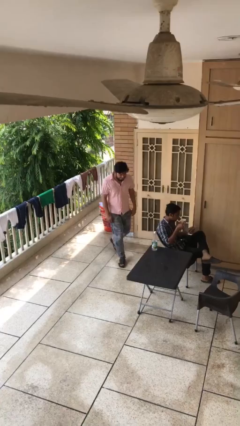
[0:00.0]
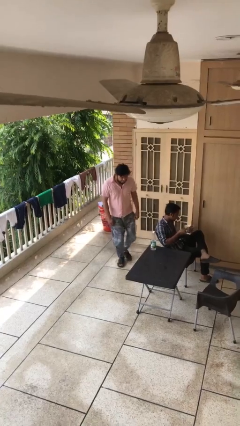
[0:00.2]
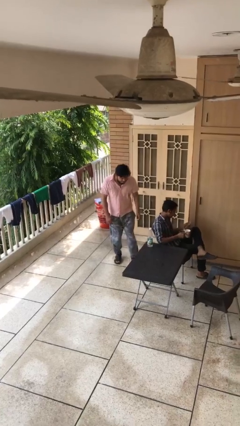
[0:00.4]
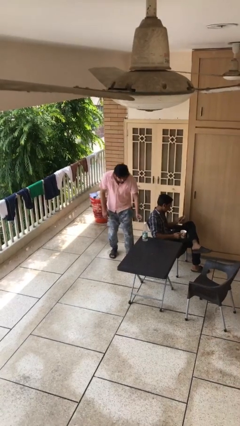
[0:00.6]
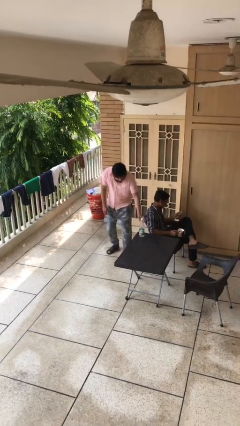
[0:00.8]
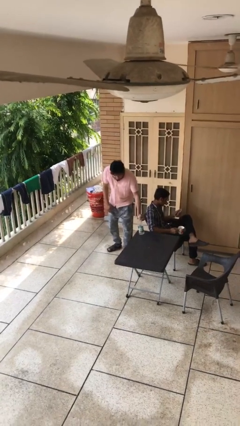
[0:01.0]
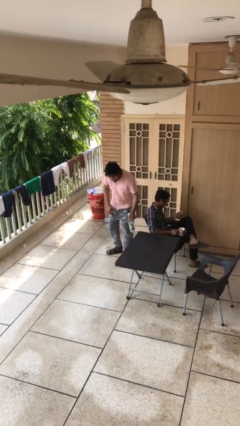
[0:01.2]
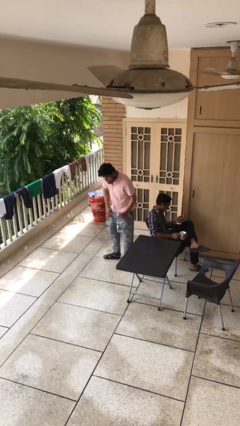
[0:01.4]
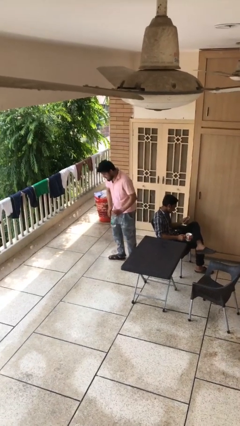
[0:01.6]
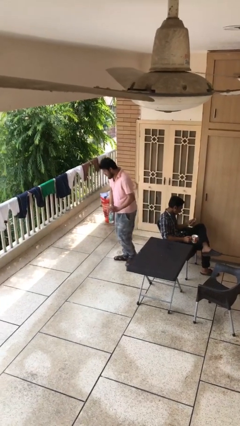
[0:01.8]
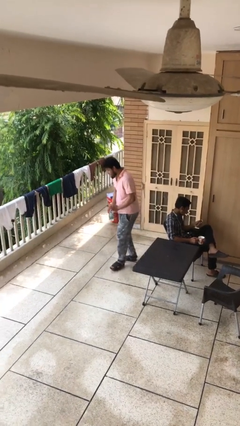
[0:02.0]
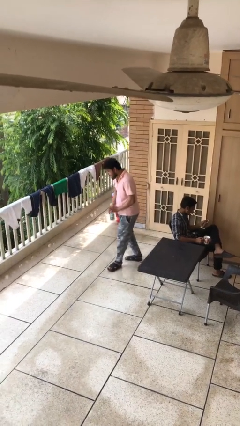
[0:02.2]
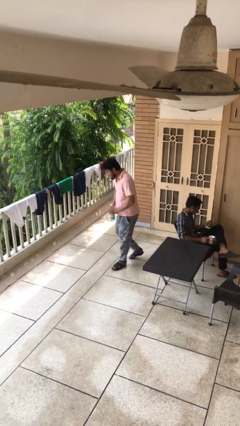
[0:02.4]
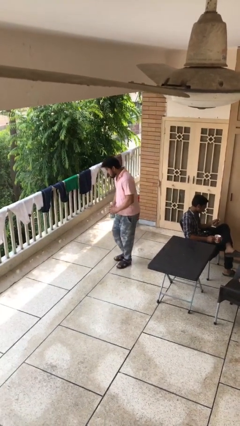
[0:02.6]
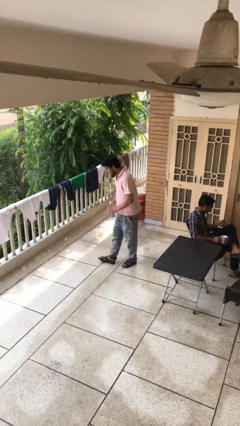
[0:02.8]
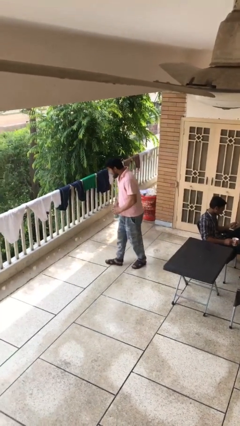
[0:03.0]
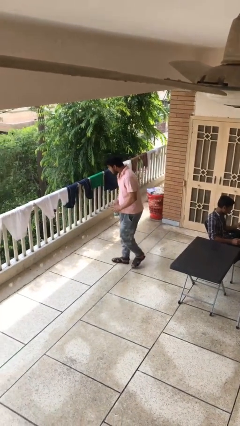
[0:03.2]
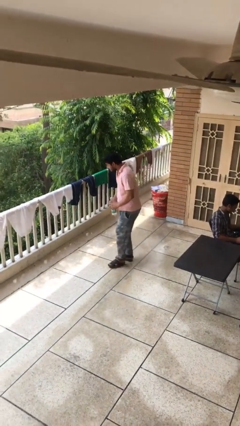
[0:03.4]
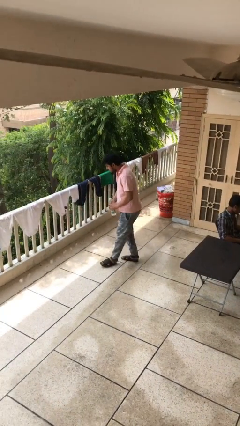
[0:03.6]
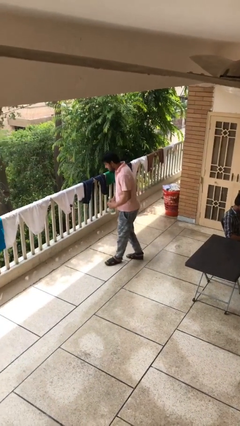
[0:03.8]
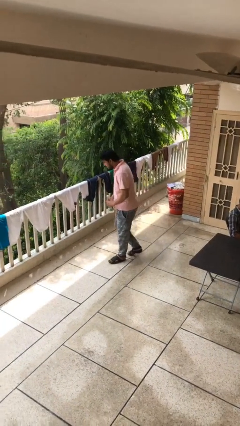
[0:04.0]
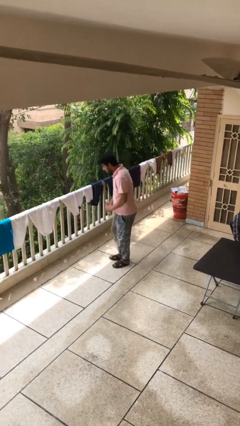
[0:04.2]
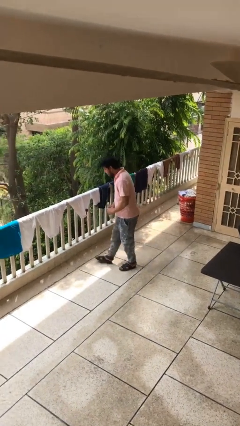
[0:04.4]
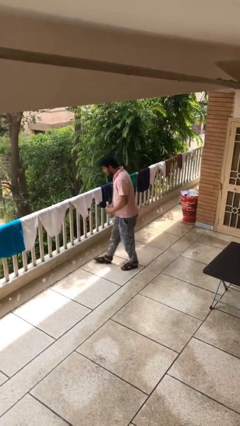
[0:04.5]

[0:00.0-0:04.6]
person steals object from person

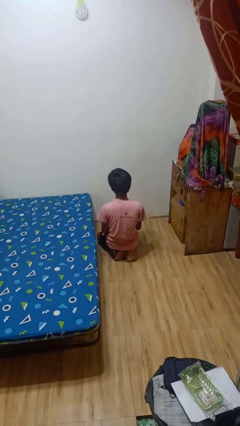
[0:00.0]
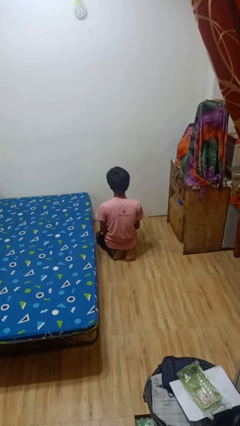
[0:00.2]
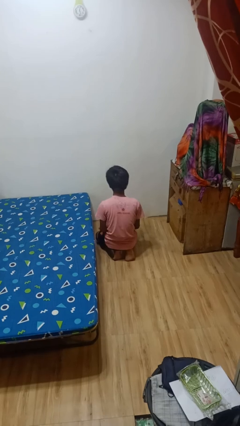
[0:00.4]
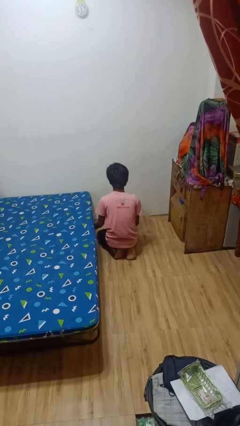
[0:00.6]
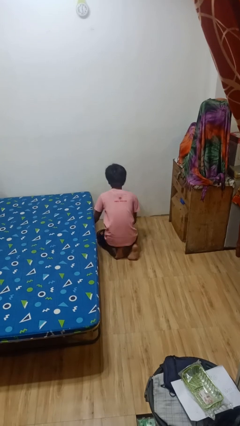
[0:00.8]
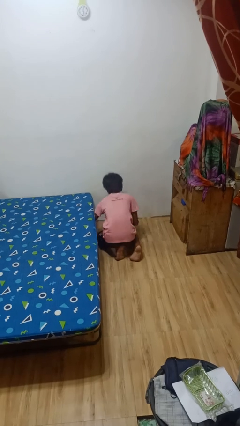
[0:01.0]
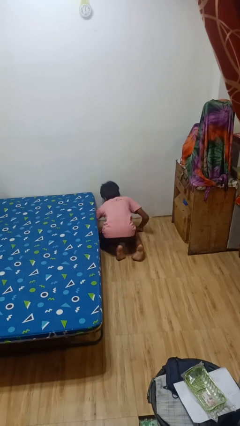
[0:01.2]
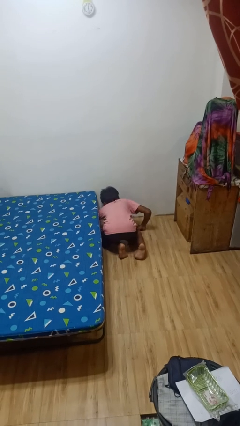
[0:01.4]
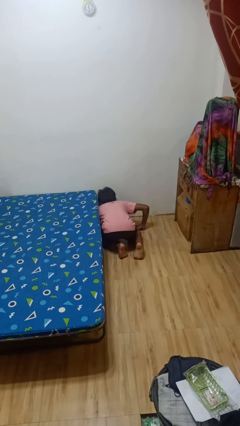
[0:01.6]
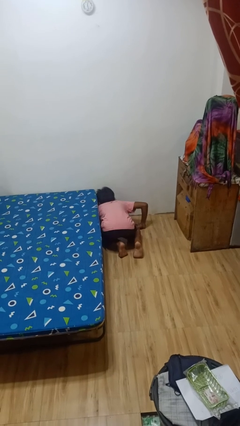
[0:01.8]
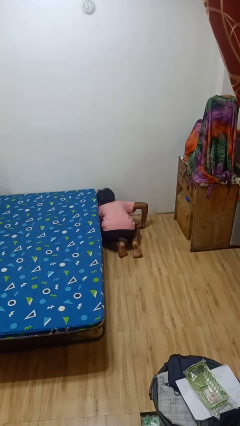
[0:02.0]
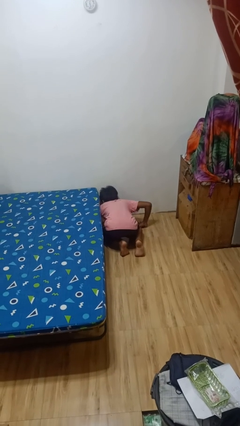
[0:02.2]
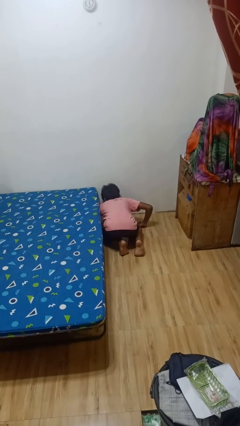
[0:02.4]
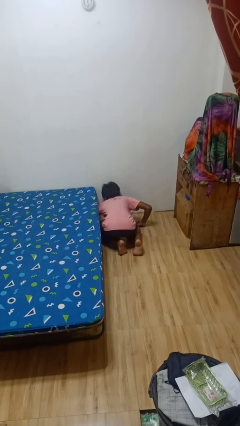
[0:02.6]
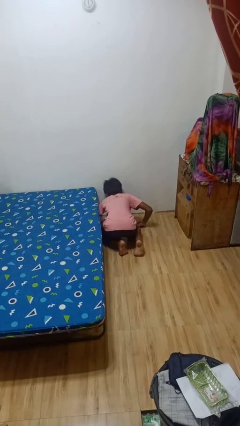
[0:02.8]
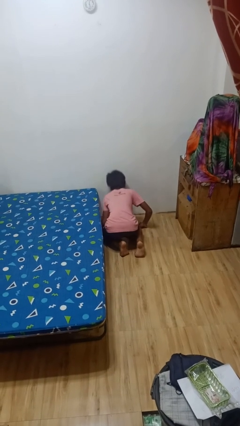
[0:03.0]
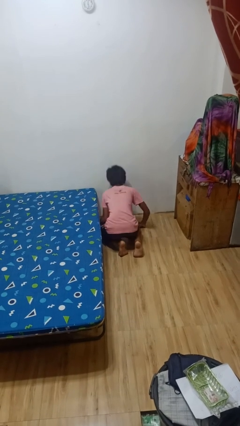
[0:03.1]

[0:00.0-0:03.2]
person searches under bed

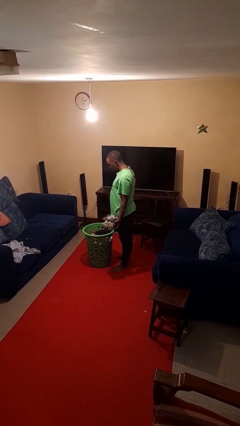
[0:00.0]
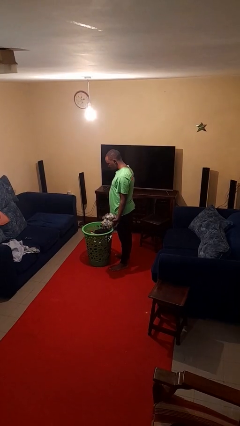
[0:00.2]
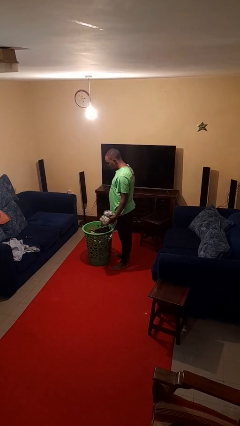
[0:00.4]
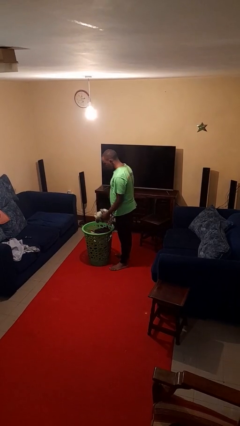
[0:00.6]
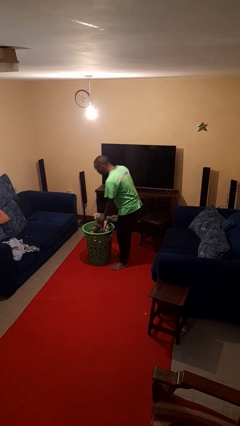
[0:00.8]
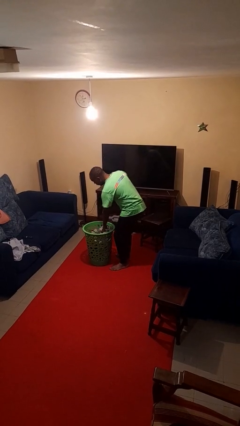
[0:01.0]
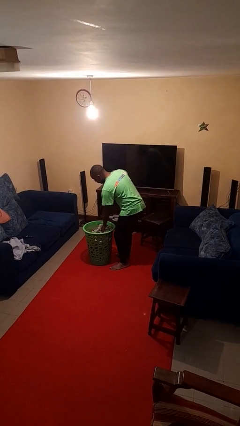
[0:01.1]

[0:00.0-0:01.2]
person puts object into basket

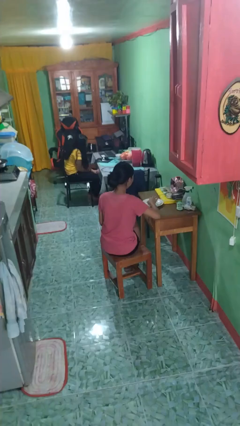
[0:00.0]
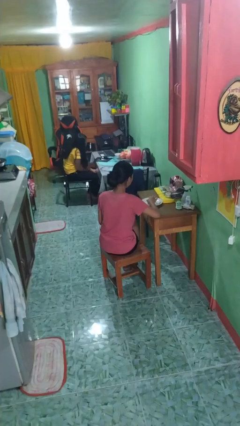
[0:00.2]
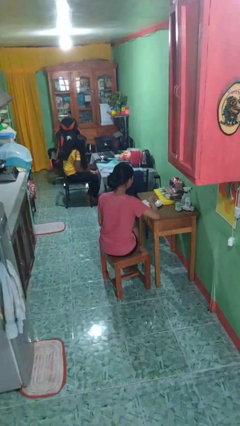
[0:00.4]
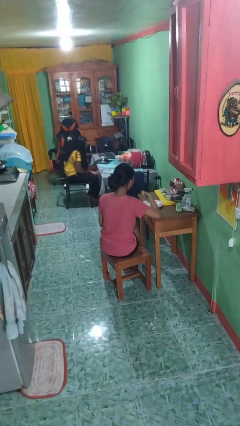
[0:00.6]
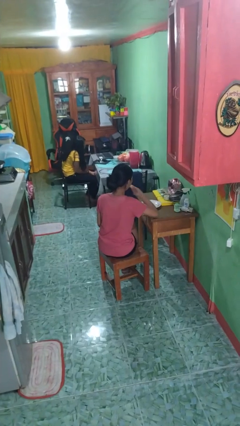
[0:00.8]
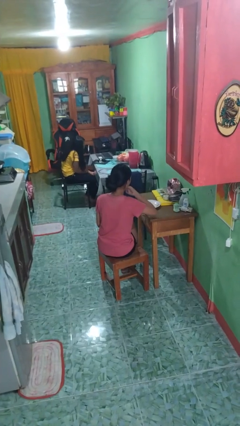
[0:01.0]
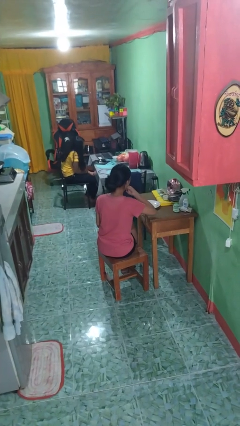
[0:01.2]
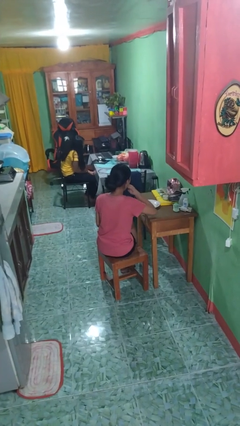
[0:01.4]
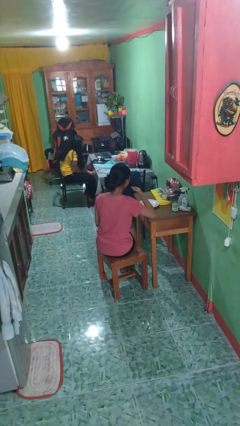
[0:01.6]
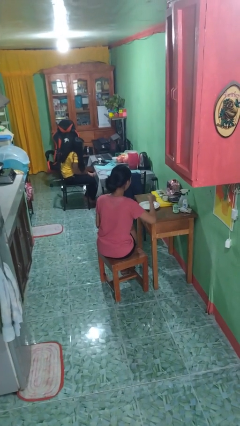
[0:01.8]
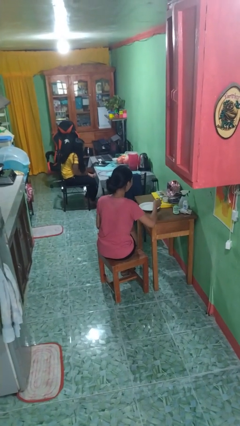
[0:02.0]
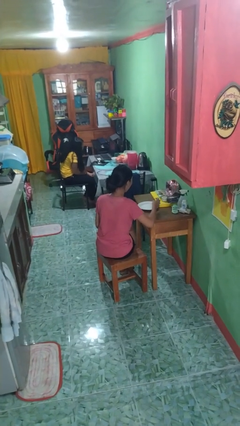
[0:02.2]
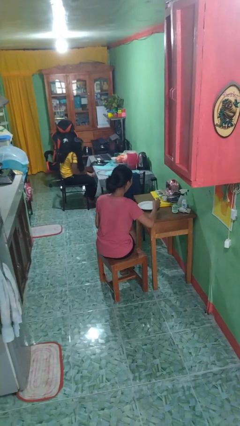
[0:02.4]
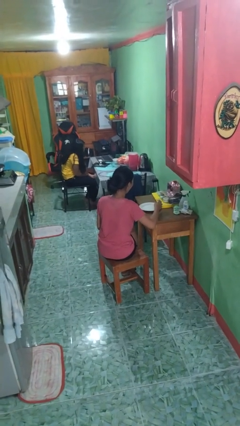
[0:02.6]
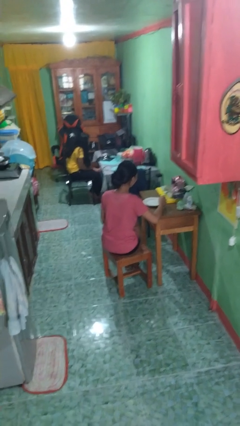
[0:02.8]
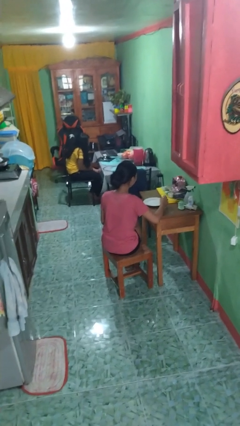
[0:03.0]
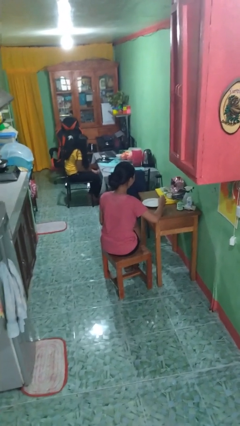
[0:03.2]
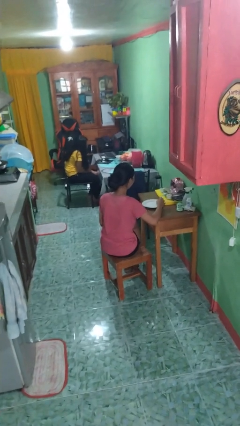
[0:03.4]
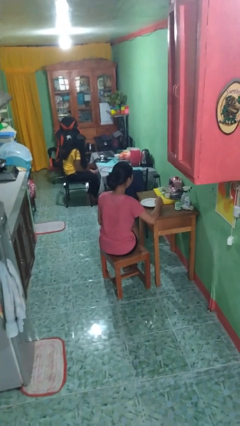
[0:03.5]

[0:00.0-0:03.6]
person eats with hands

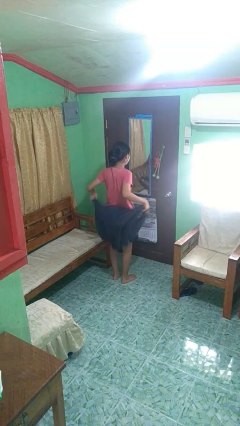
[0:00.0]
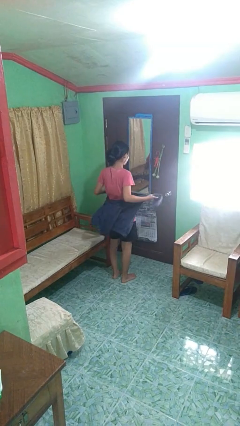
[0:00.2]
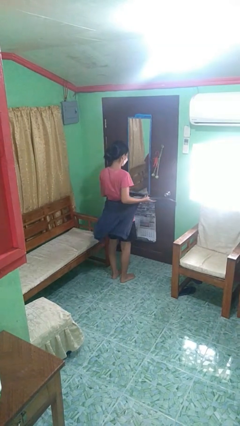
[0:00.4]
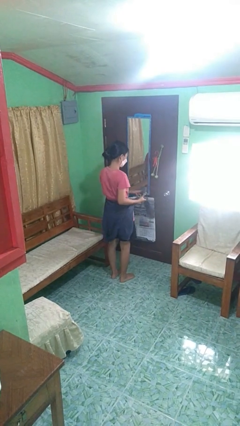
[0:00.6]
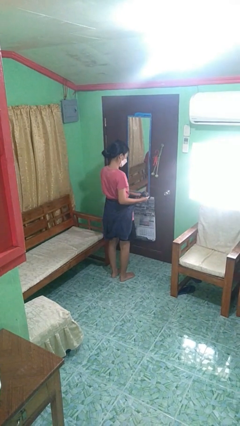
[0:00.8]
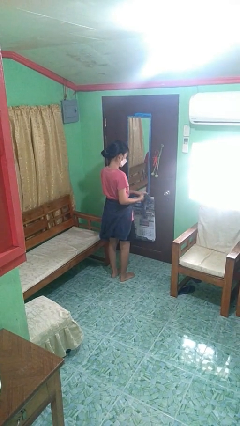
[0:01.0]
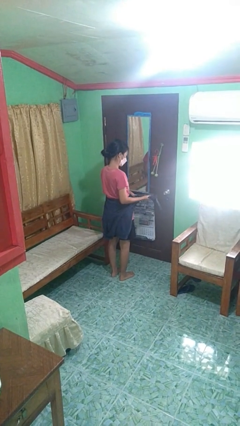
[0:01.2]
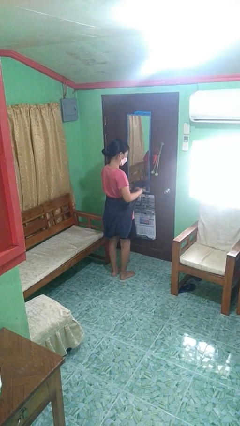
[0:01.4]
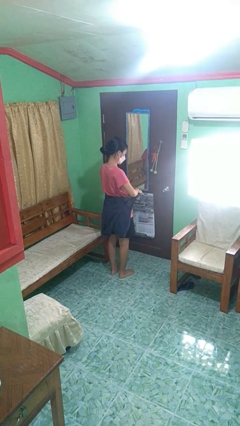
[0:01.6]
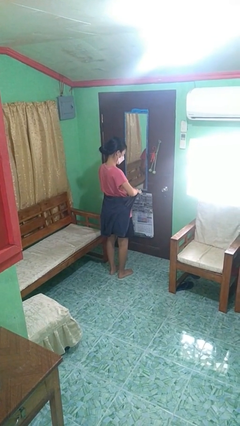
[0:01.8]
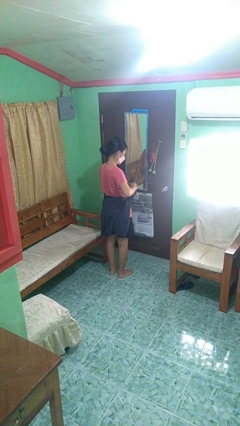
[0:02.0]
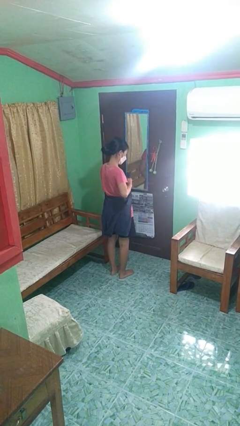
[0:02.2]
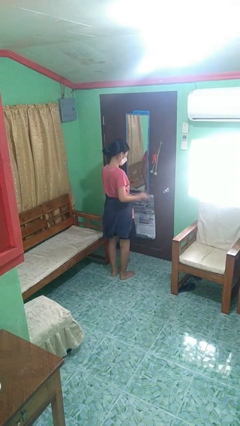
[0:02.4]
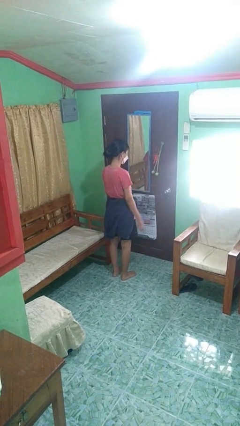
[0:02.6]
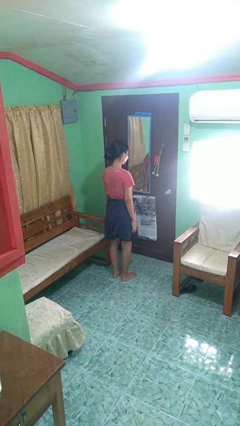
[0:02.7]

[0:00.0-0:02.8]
person ties jacket around waist

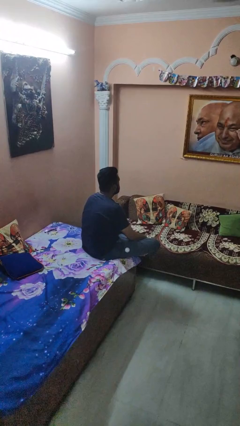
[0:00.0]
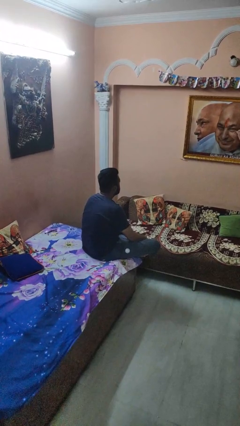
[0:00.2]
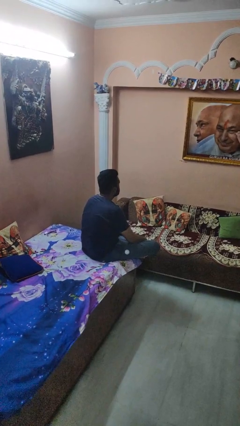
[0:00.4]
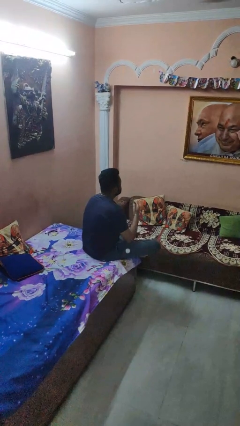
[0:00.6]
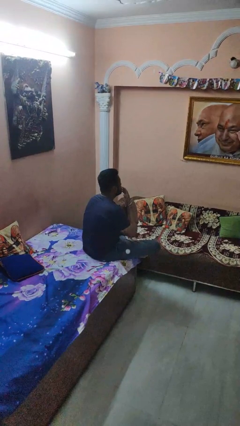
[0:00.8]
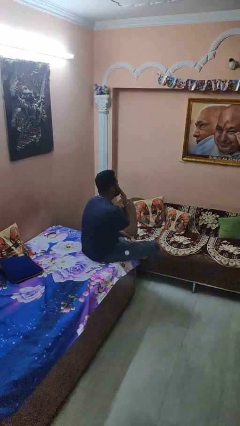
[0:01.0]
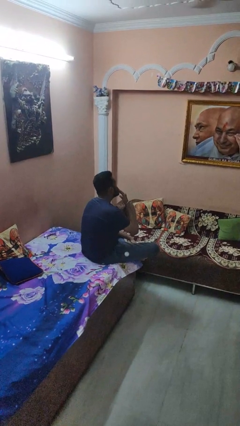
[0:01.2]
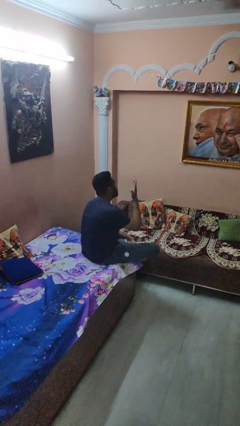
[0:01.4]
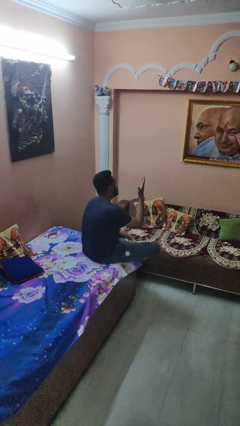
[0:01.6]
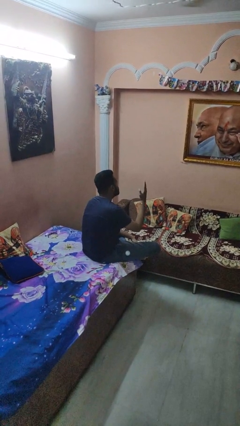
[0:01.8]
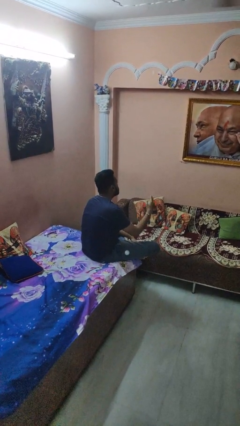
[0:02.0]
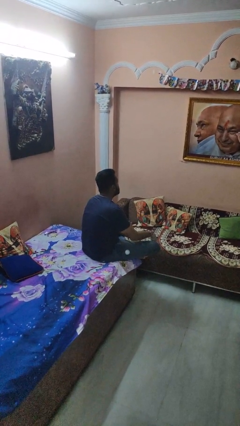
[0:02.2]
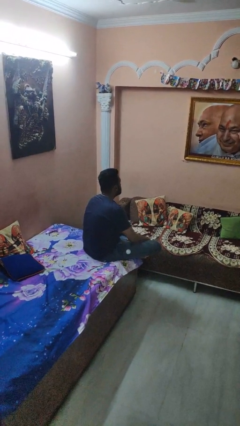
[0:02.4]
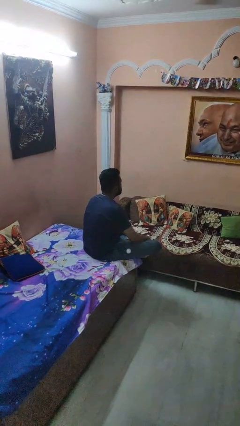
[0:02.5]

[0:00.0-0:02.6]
person gestures blow kiss
